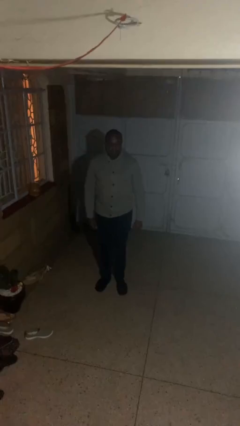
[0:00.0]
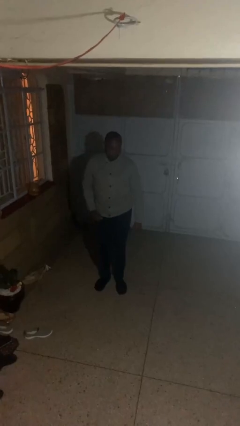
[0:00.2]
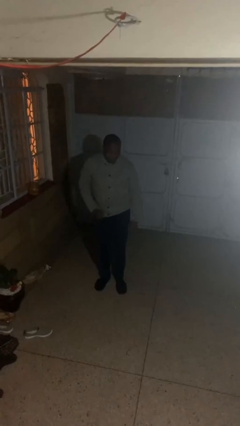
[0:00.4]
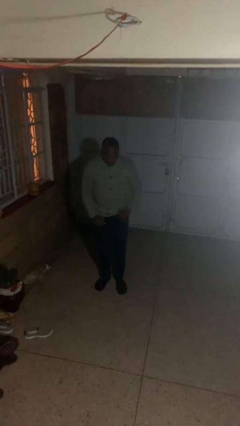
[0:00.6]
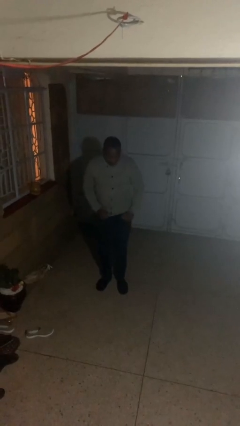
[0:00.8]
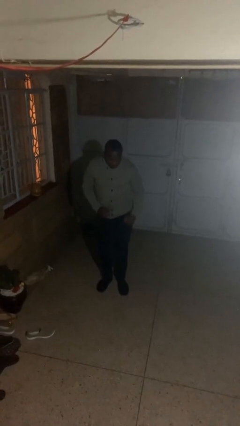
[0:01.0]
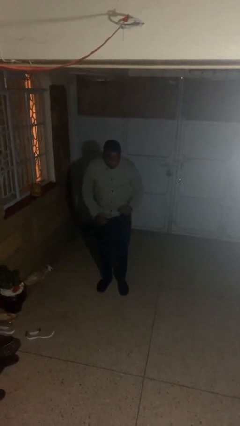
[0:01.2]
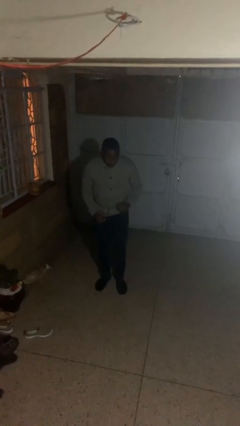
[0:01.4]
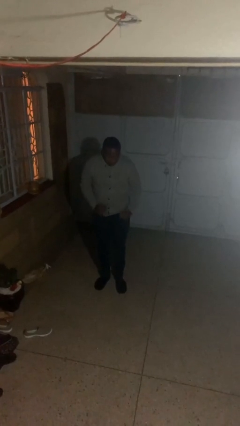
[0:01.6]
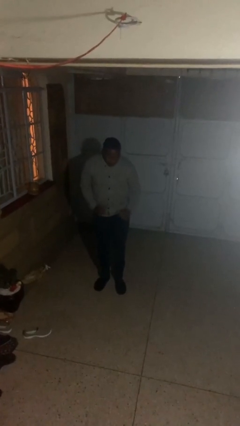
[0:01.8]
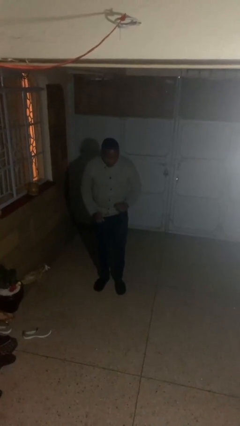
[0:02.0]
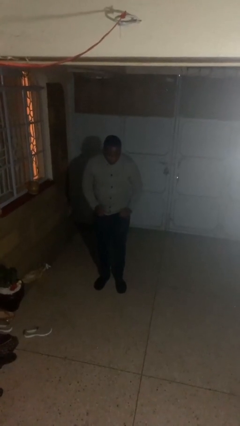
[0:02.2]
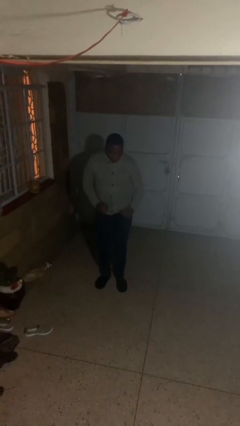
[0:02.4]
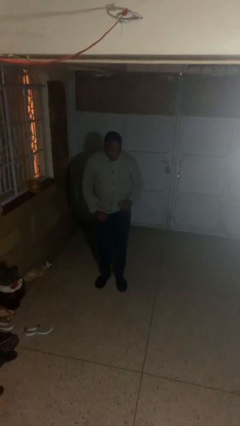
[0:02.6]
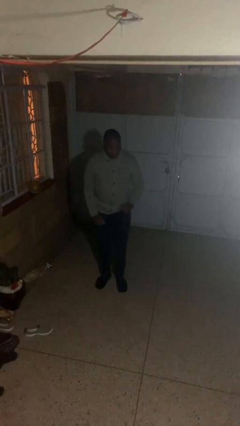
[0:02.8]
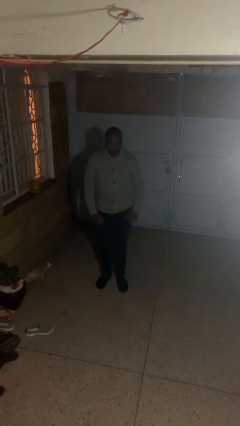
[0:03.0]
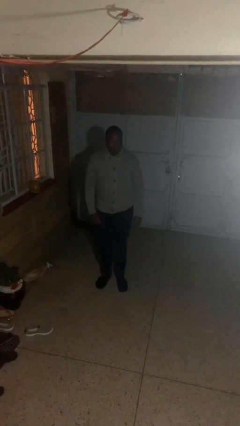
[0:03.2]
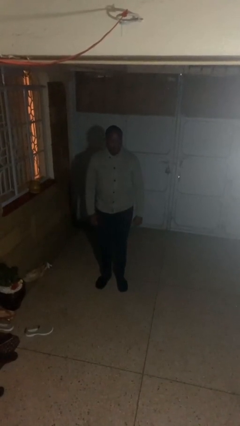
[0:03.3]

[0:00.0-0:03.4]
person dances in place

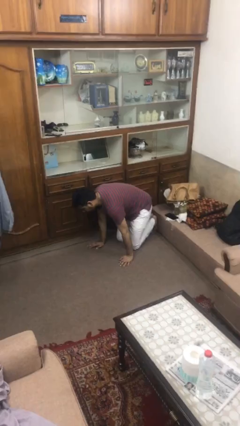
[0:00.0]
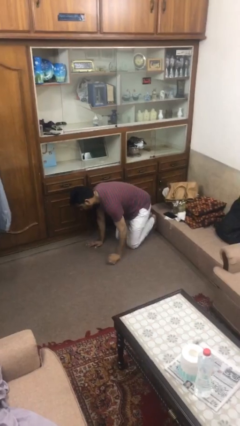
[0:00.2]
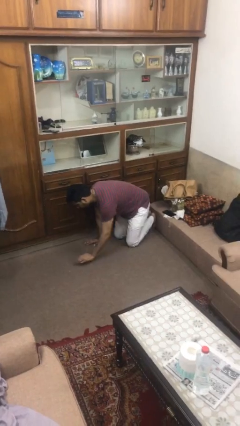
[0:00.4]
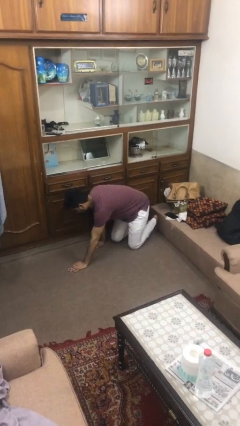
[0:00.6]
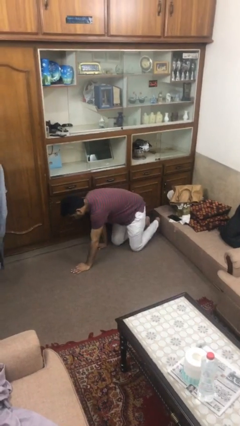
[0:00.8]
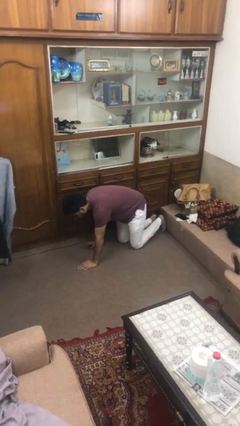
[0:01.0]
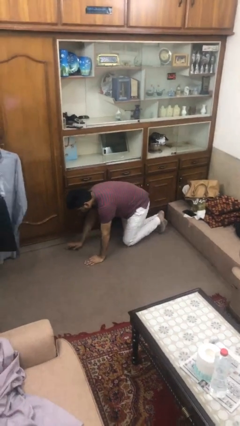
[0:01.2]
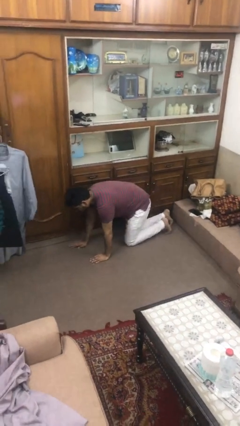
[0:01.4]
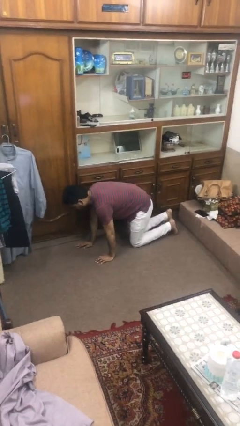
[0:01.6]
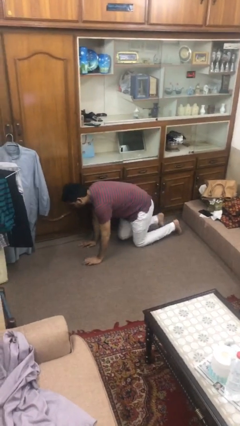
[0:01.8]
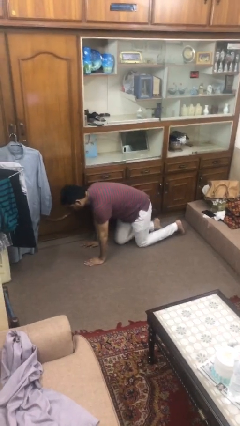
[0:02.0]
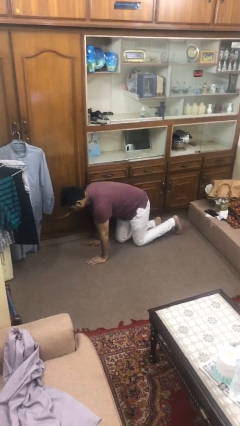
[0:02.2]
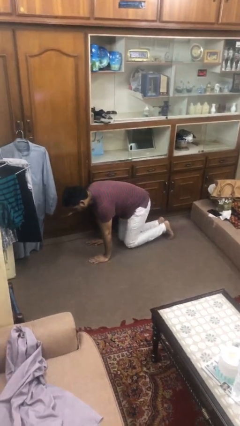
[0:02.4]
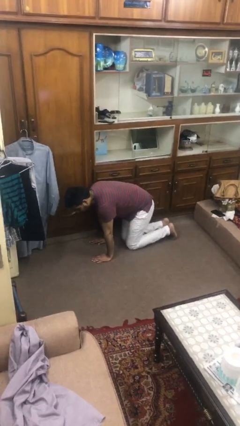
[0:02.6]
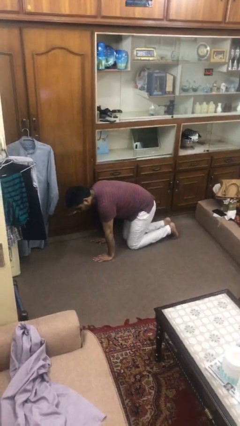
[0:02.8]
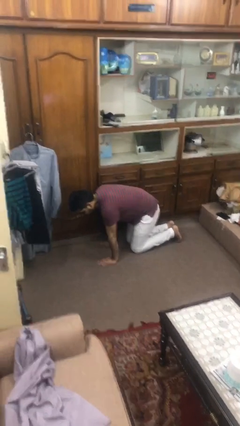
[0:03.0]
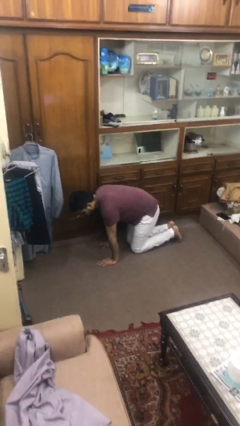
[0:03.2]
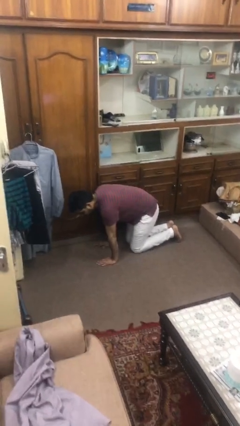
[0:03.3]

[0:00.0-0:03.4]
person crawls

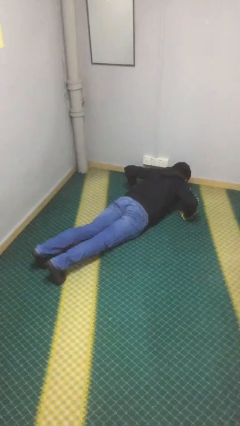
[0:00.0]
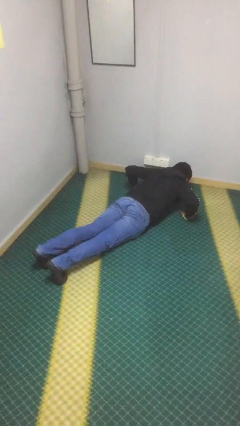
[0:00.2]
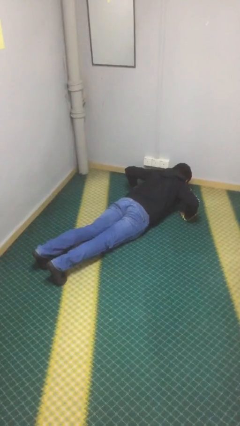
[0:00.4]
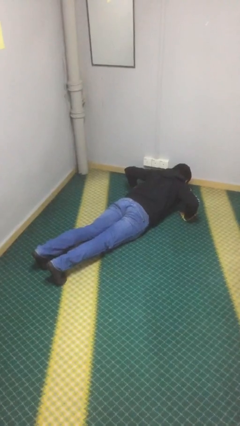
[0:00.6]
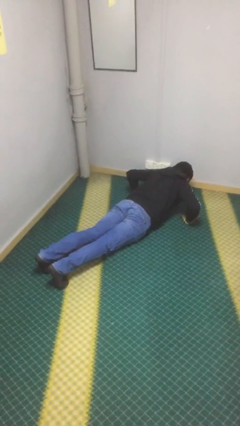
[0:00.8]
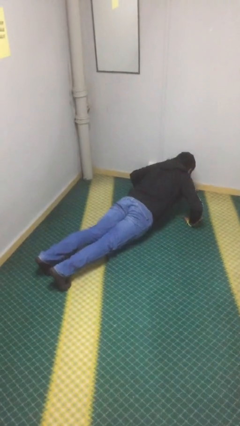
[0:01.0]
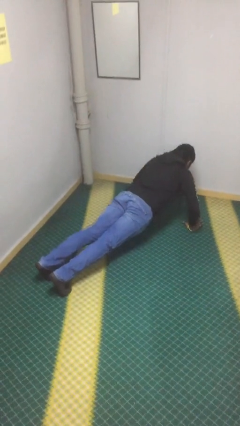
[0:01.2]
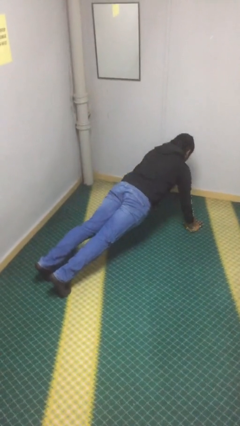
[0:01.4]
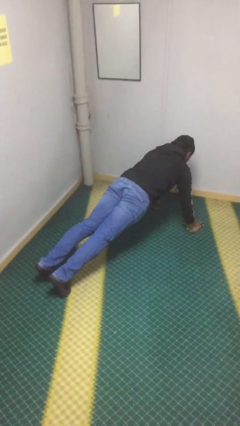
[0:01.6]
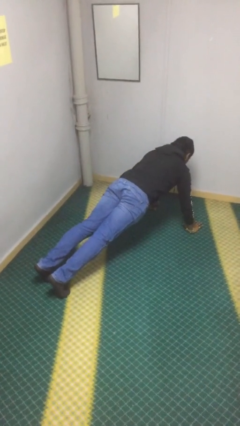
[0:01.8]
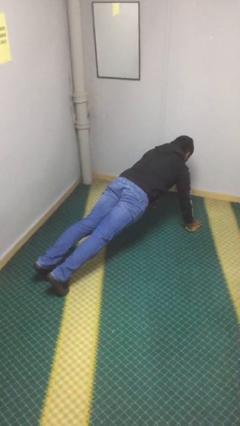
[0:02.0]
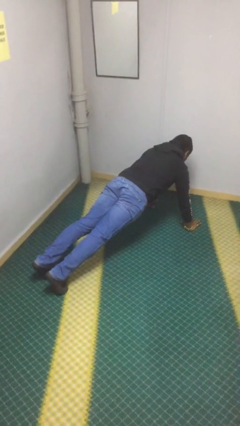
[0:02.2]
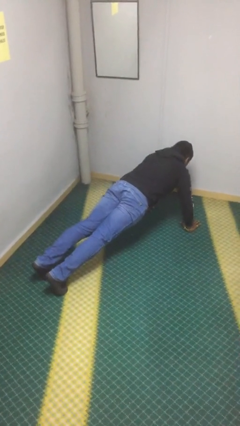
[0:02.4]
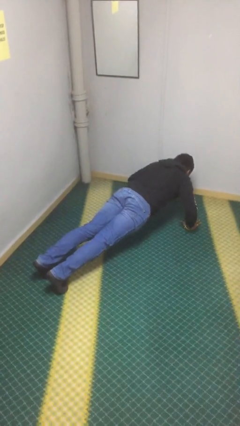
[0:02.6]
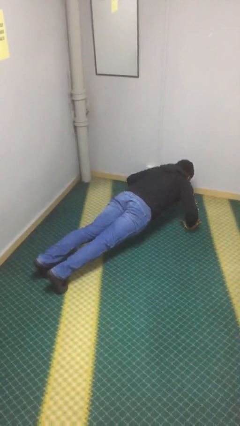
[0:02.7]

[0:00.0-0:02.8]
person exercises with pushup

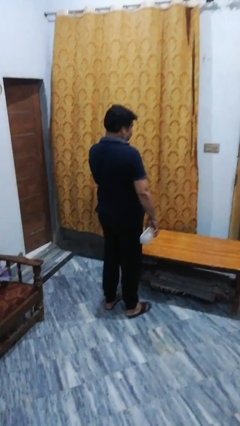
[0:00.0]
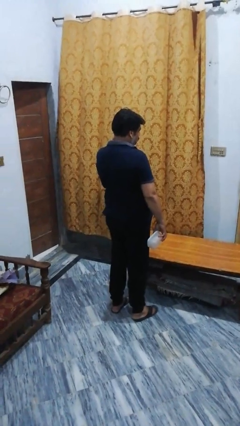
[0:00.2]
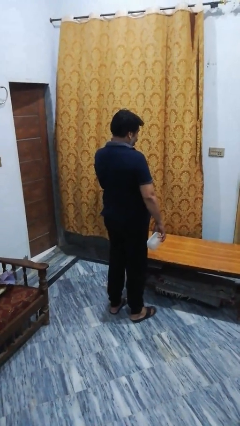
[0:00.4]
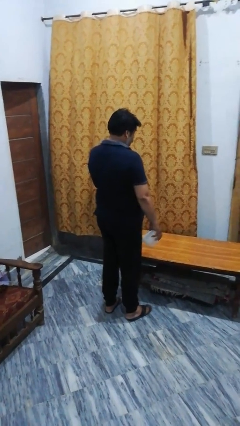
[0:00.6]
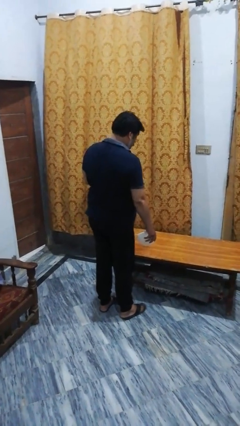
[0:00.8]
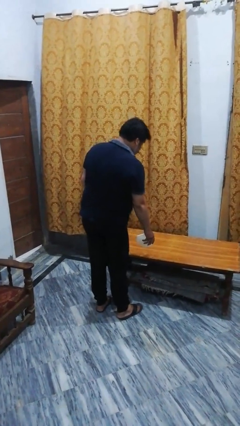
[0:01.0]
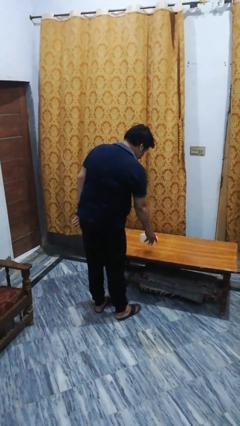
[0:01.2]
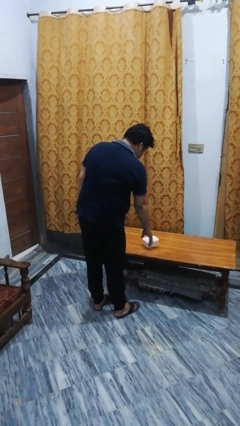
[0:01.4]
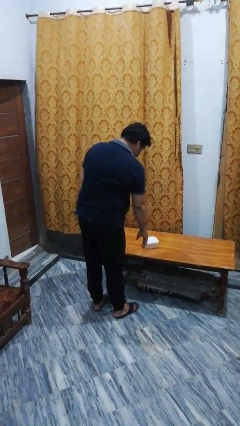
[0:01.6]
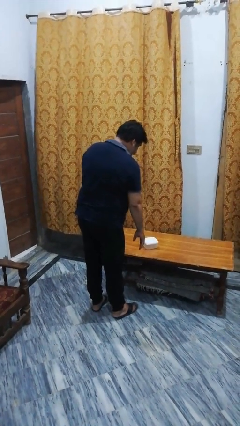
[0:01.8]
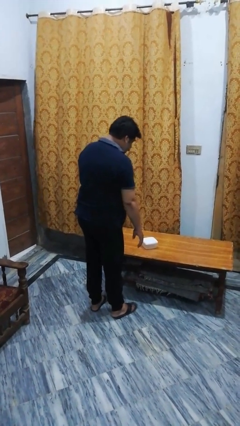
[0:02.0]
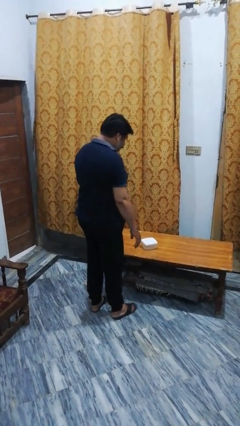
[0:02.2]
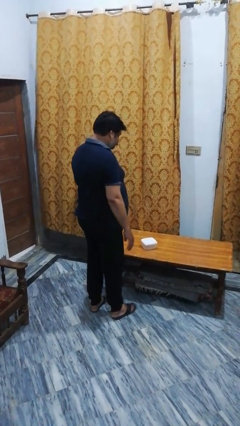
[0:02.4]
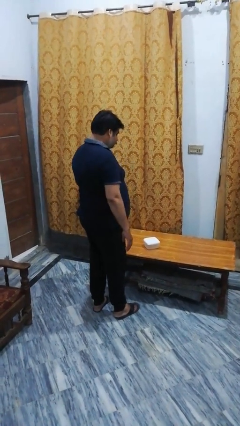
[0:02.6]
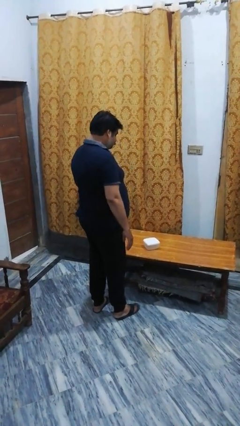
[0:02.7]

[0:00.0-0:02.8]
person throws object on table

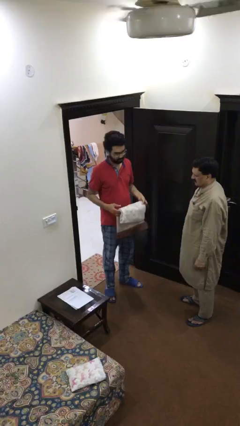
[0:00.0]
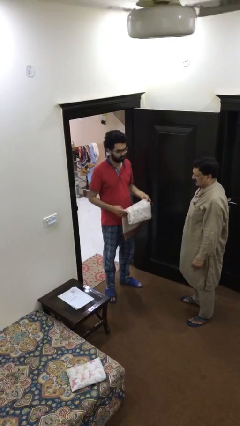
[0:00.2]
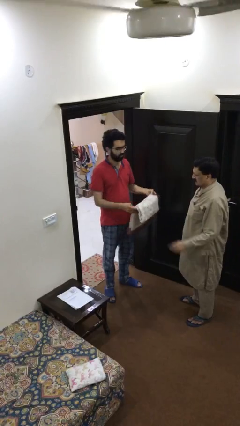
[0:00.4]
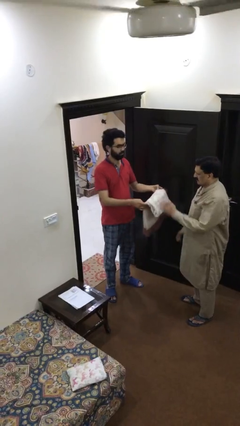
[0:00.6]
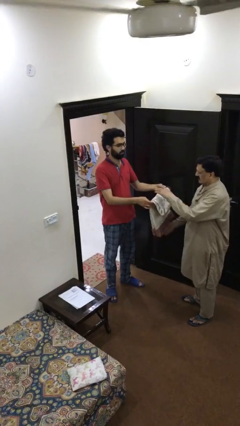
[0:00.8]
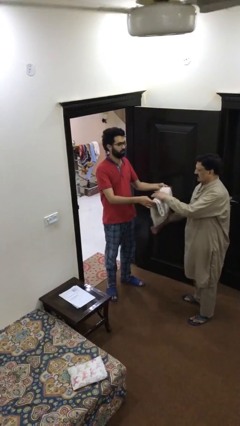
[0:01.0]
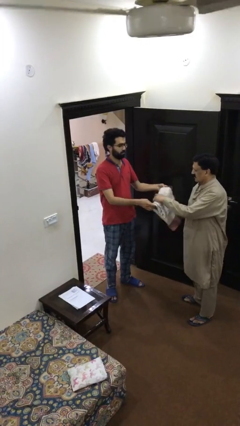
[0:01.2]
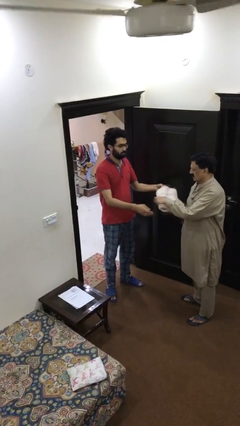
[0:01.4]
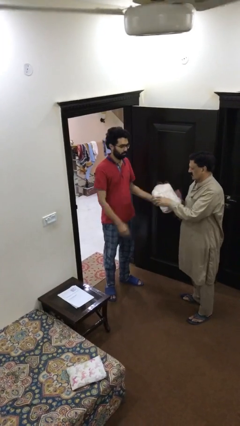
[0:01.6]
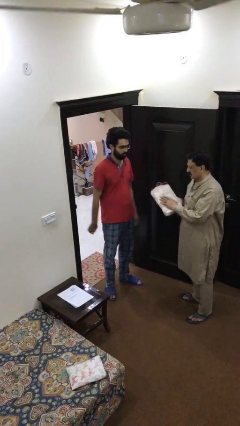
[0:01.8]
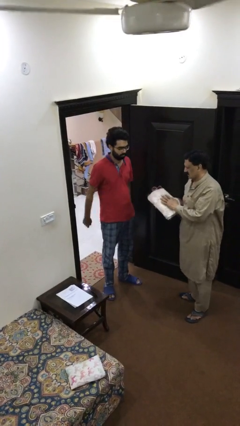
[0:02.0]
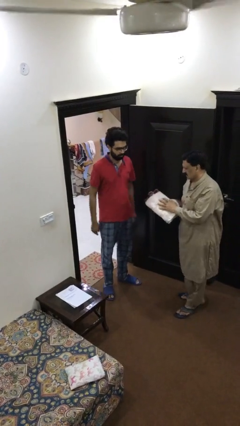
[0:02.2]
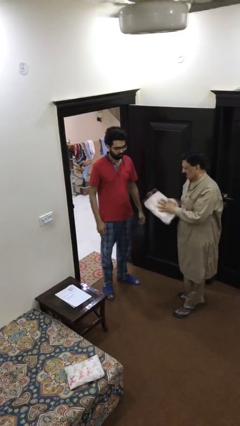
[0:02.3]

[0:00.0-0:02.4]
person transfers object to person

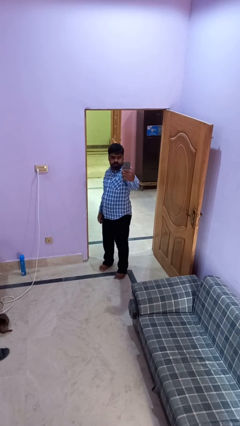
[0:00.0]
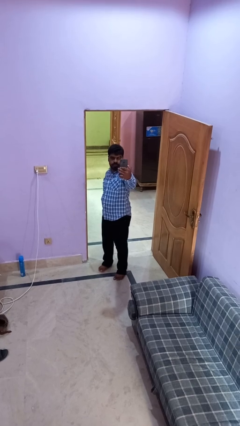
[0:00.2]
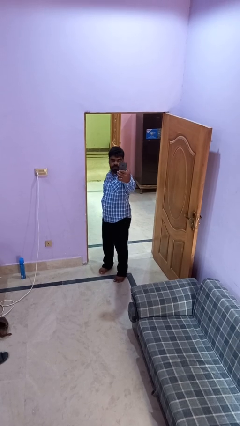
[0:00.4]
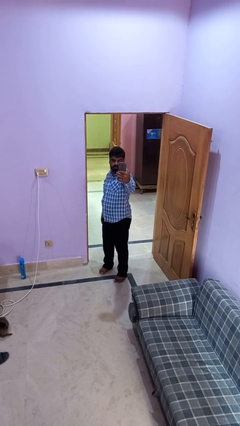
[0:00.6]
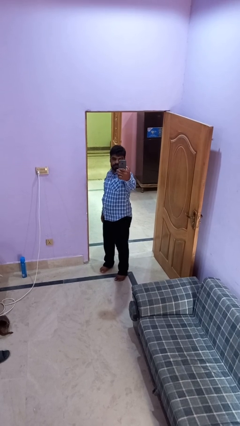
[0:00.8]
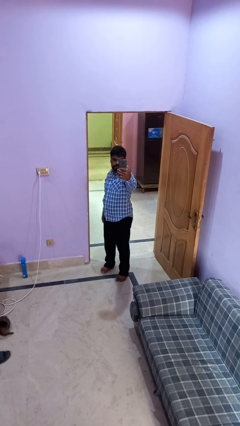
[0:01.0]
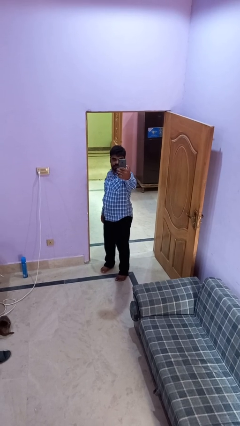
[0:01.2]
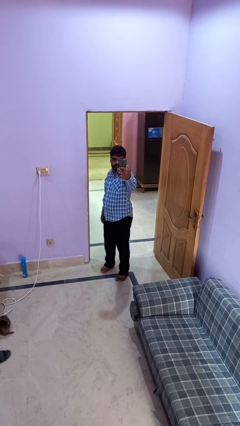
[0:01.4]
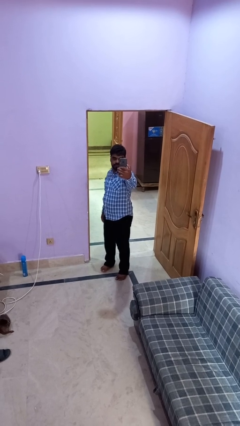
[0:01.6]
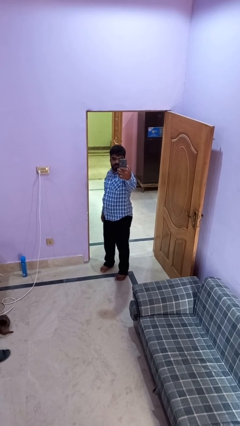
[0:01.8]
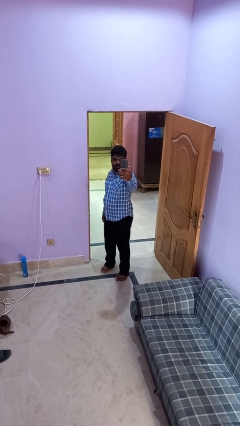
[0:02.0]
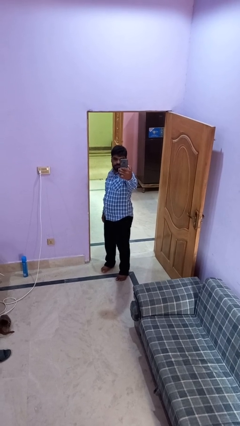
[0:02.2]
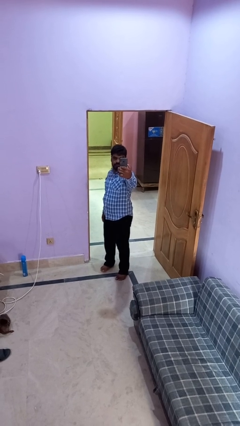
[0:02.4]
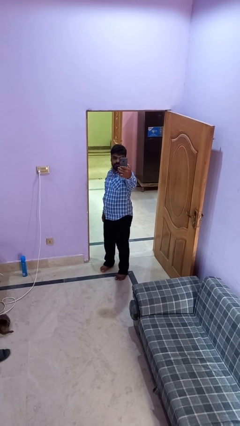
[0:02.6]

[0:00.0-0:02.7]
person takes selfie

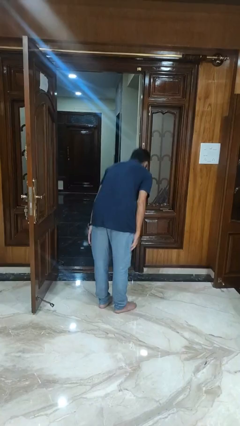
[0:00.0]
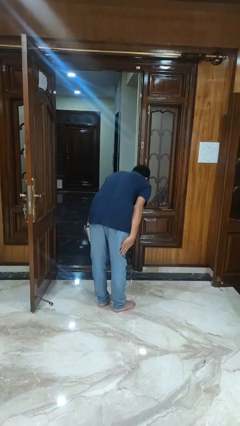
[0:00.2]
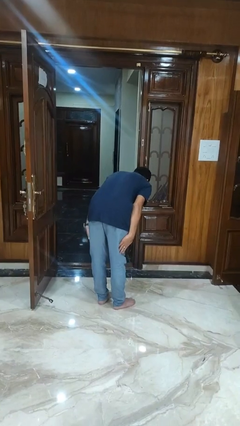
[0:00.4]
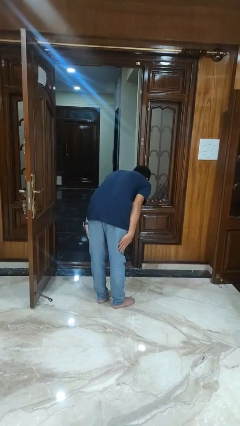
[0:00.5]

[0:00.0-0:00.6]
person bows
